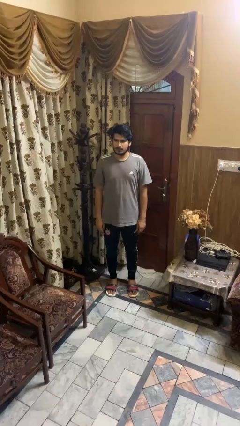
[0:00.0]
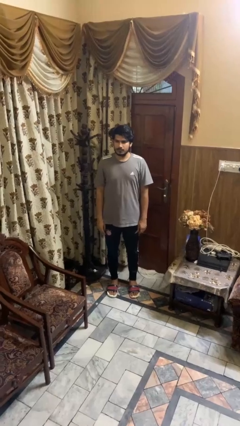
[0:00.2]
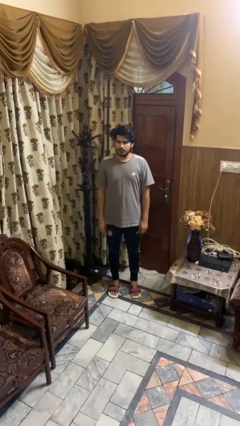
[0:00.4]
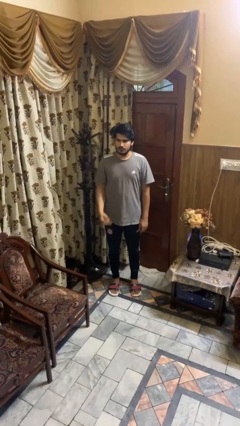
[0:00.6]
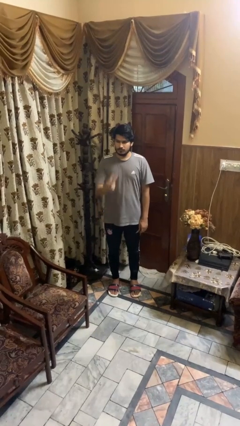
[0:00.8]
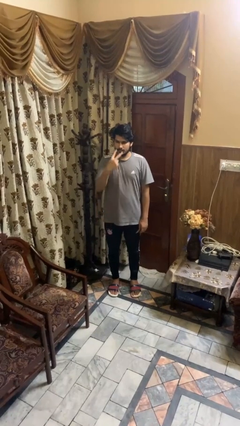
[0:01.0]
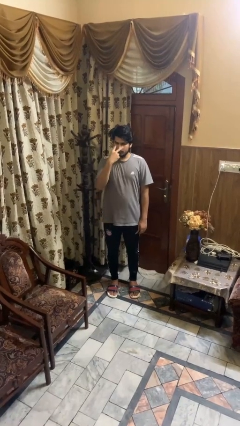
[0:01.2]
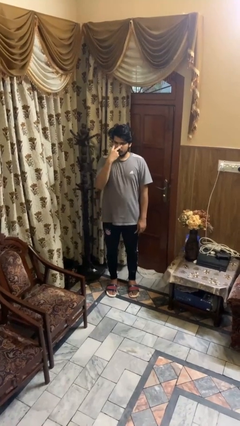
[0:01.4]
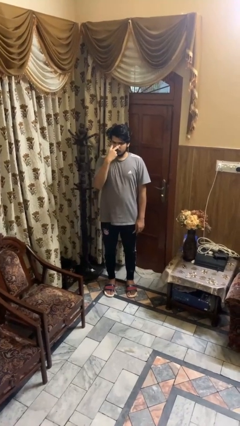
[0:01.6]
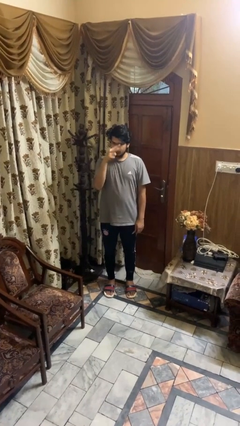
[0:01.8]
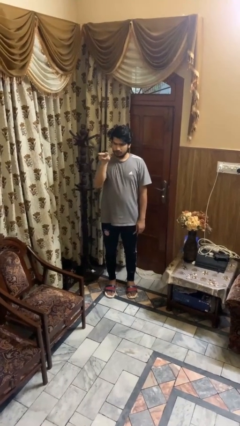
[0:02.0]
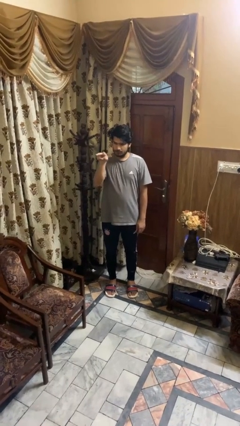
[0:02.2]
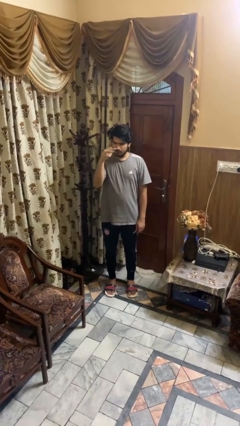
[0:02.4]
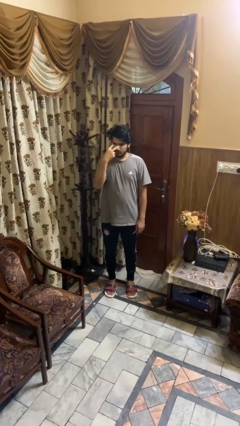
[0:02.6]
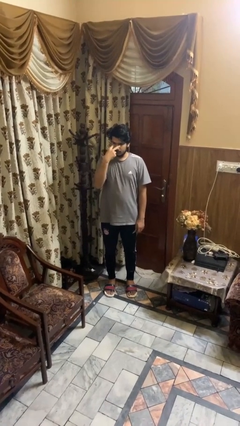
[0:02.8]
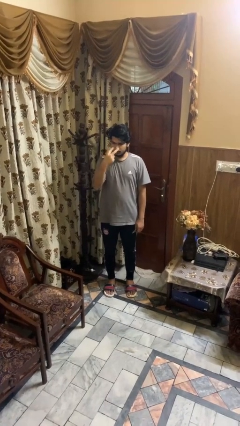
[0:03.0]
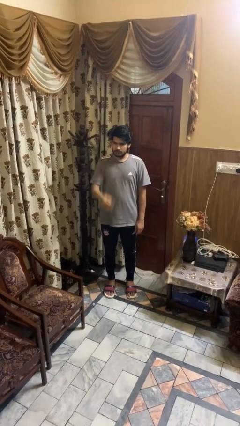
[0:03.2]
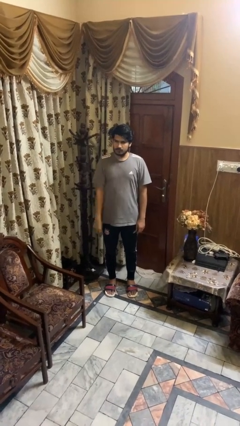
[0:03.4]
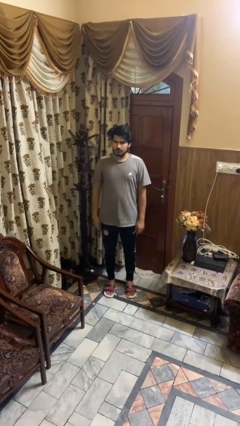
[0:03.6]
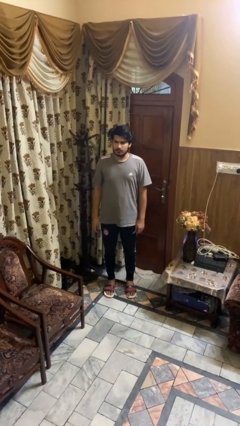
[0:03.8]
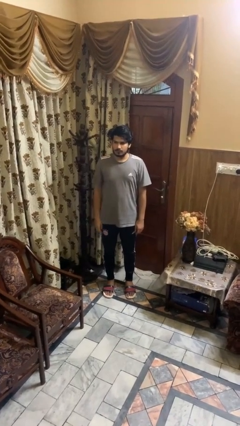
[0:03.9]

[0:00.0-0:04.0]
person gestures watch closely

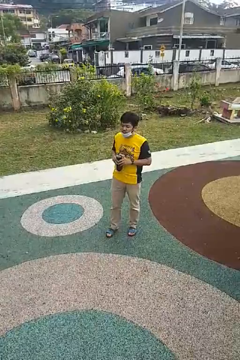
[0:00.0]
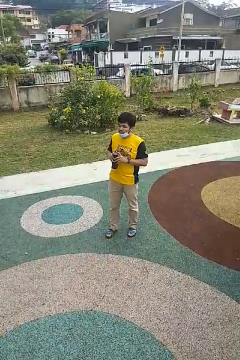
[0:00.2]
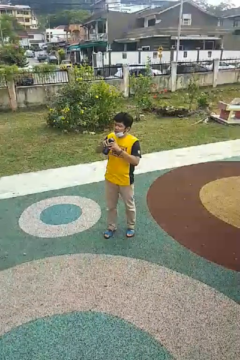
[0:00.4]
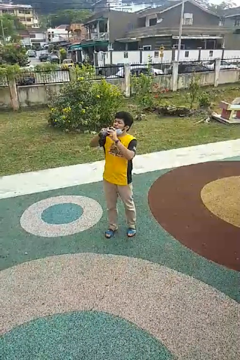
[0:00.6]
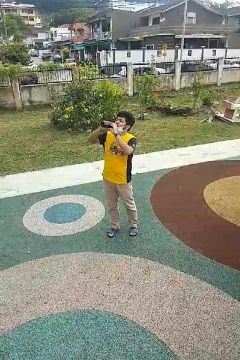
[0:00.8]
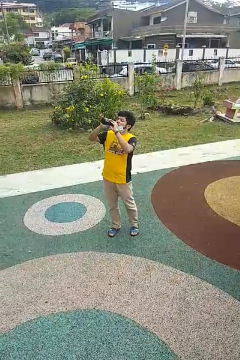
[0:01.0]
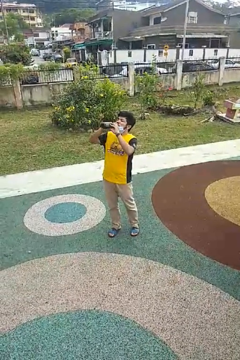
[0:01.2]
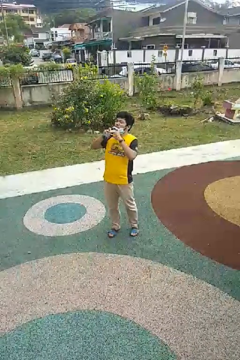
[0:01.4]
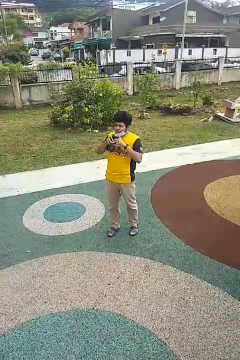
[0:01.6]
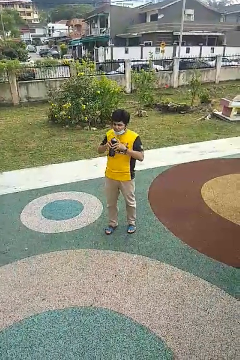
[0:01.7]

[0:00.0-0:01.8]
person drinks from bottle

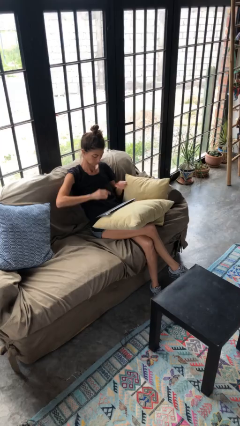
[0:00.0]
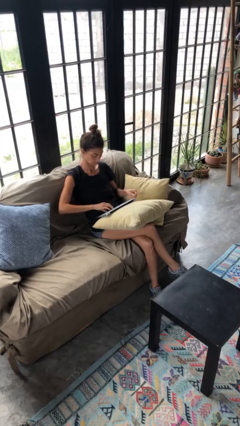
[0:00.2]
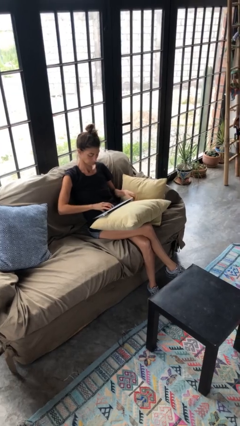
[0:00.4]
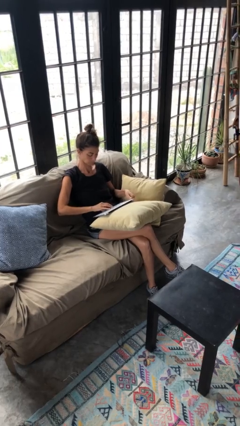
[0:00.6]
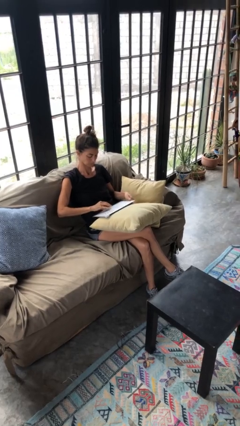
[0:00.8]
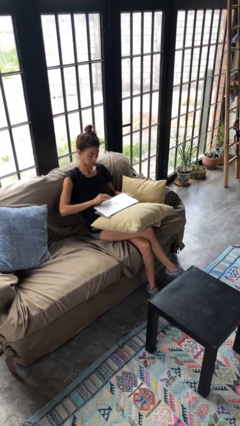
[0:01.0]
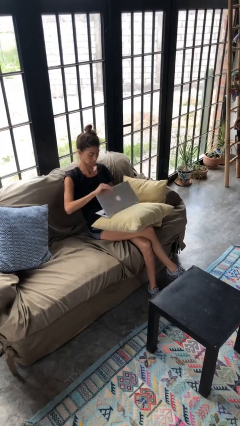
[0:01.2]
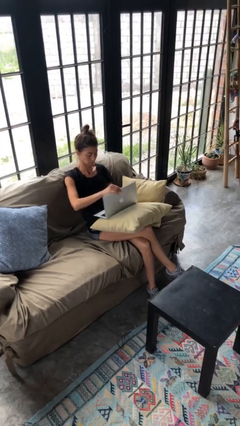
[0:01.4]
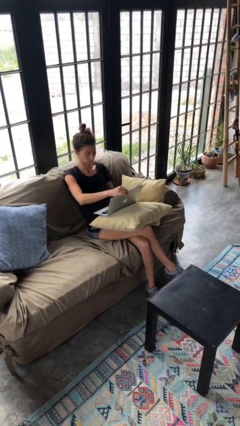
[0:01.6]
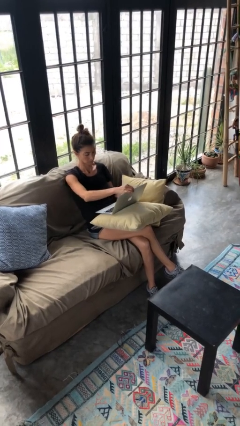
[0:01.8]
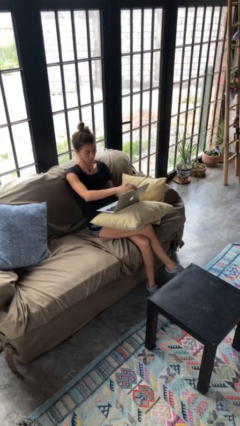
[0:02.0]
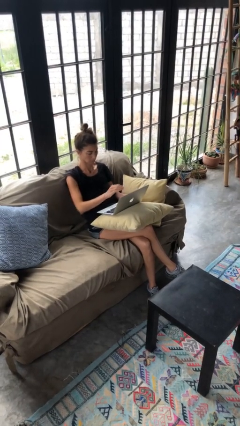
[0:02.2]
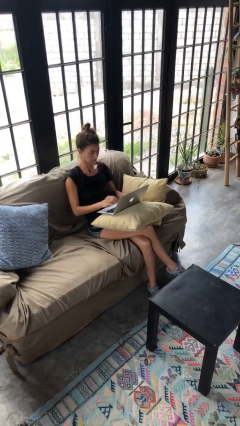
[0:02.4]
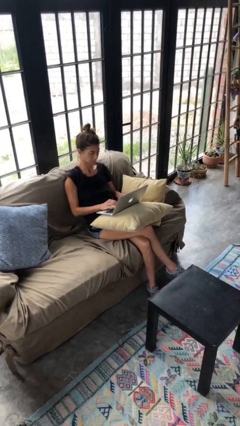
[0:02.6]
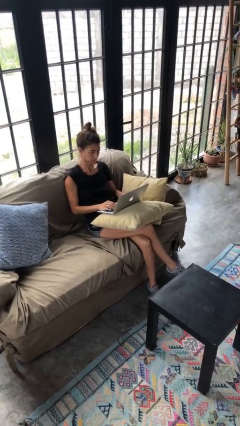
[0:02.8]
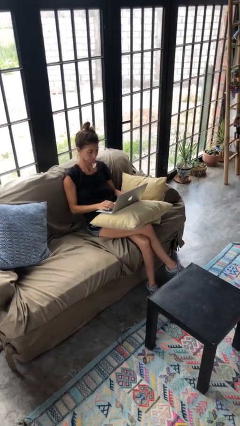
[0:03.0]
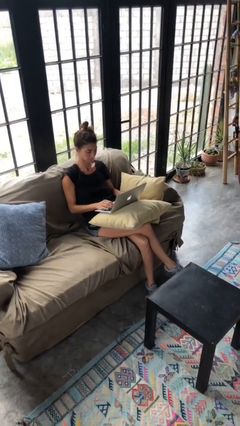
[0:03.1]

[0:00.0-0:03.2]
person opens laptop

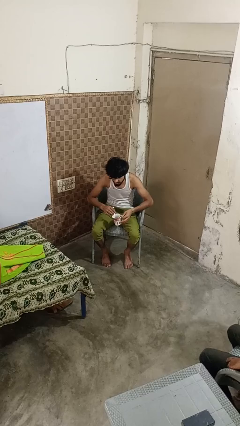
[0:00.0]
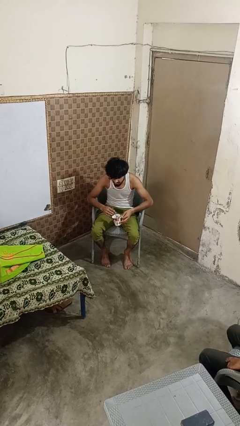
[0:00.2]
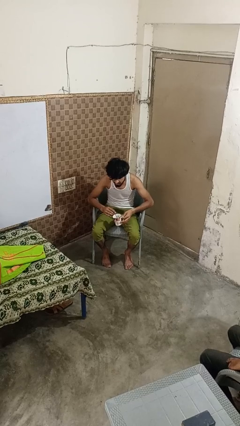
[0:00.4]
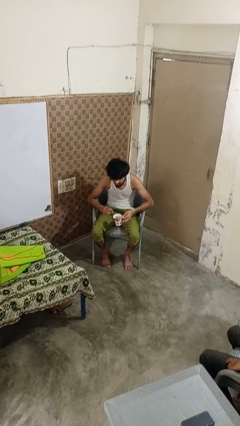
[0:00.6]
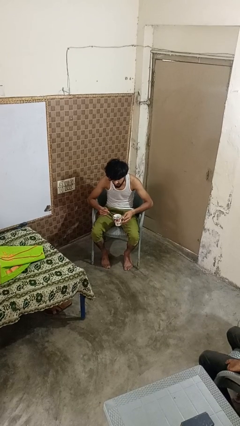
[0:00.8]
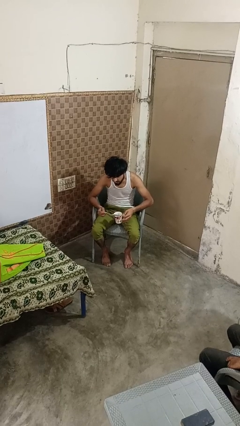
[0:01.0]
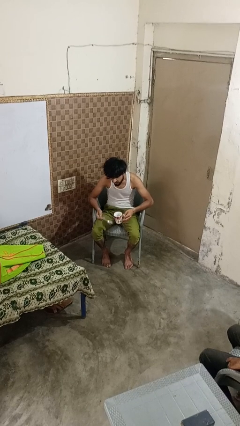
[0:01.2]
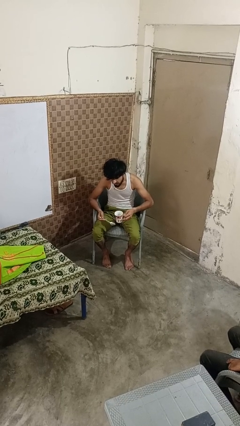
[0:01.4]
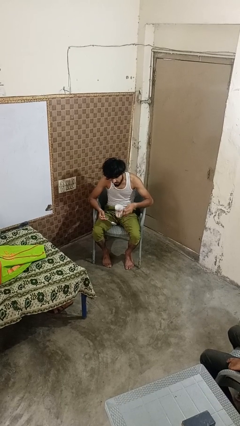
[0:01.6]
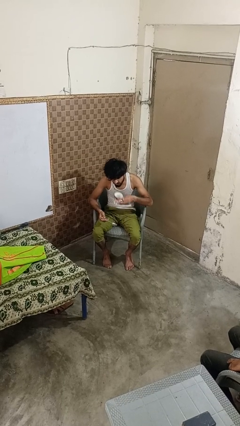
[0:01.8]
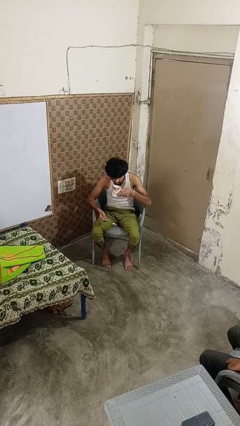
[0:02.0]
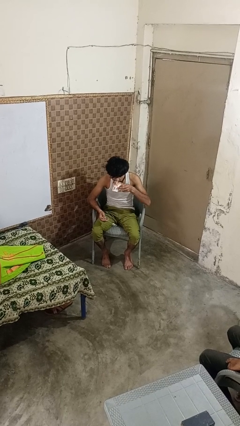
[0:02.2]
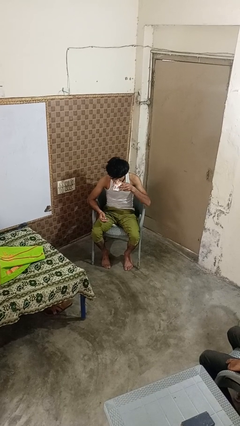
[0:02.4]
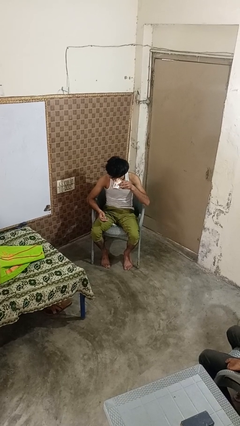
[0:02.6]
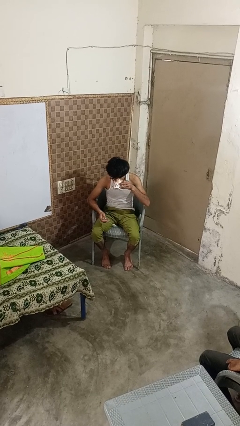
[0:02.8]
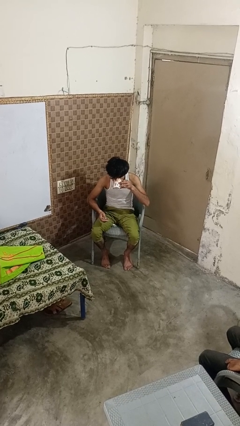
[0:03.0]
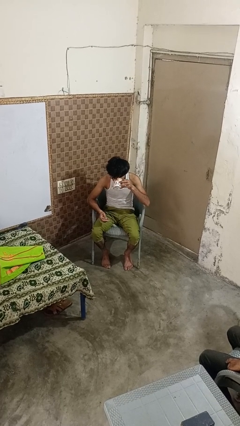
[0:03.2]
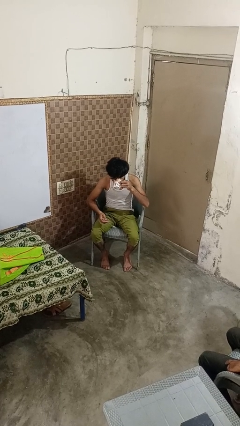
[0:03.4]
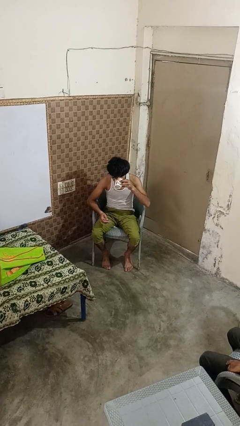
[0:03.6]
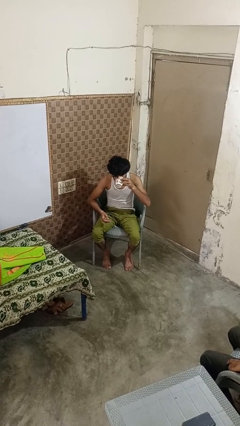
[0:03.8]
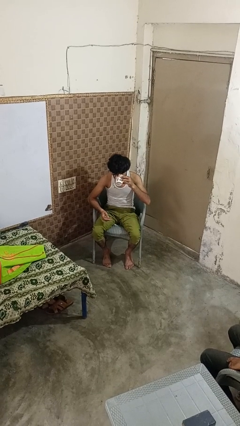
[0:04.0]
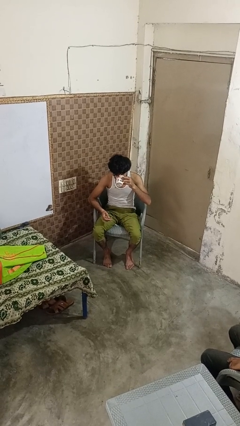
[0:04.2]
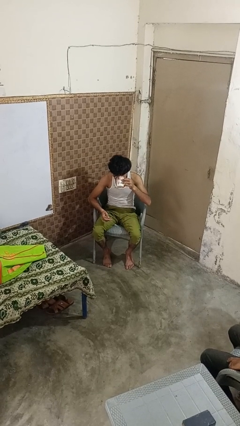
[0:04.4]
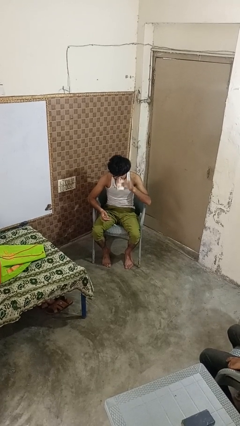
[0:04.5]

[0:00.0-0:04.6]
person drinks from mug

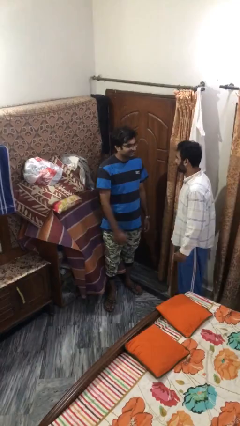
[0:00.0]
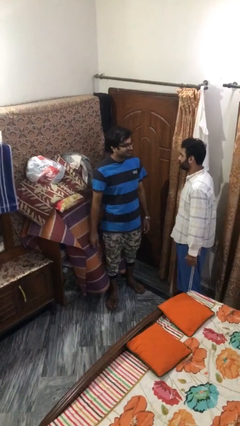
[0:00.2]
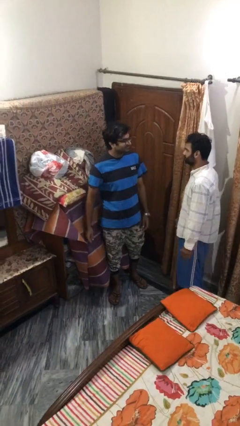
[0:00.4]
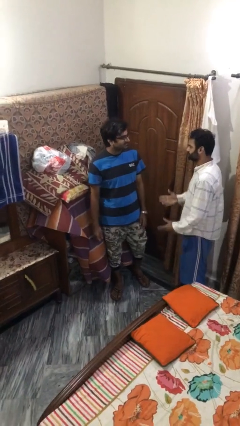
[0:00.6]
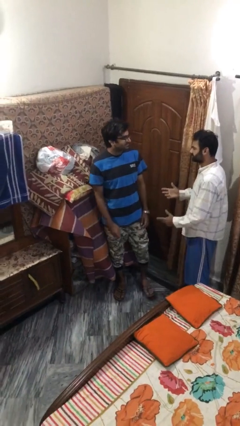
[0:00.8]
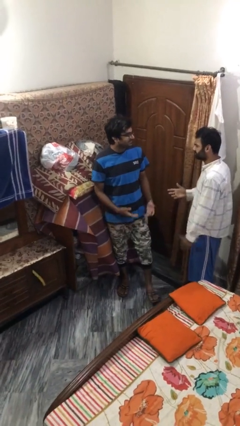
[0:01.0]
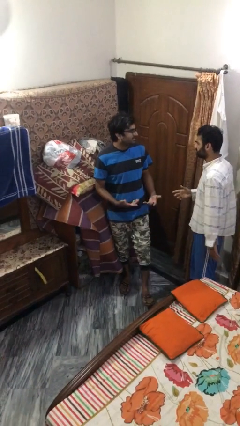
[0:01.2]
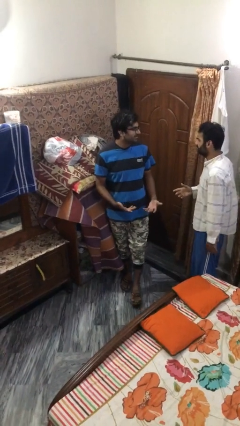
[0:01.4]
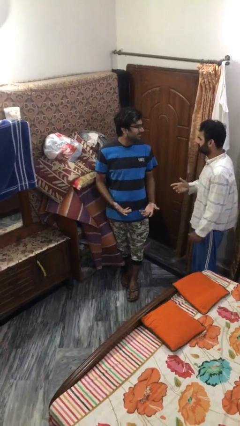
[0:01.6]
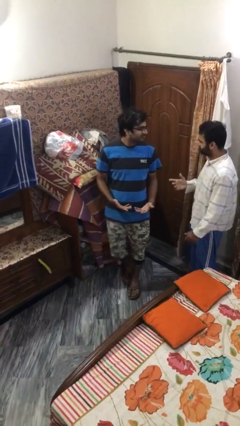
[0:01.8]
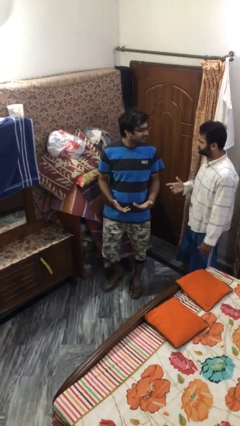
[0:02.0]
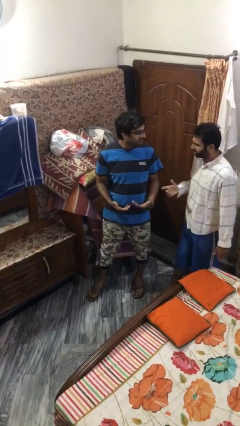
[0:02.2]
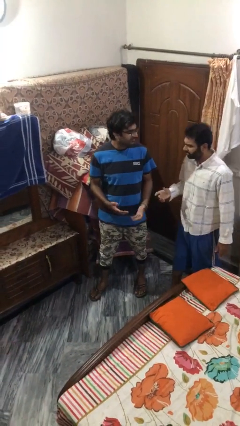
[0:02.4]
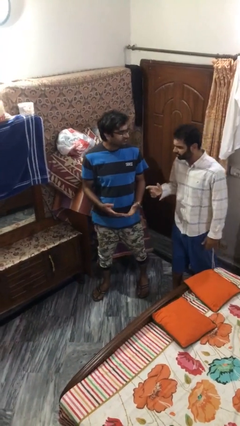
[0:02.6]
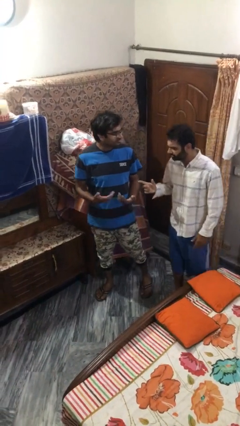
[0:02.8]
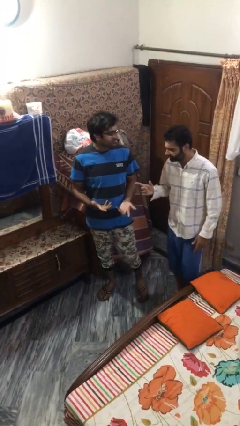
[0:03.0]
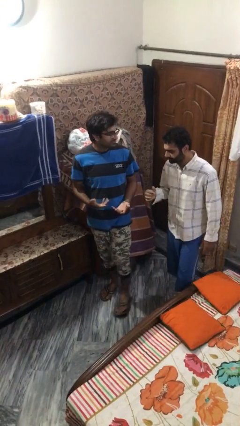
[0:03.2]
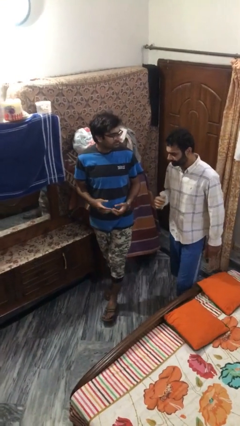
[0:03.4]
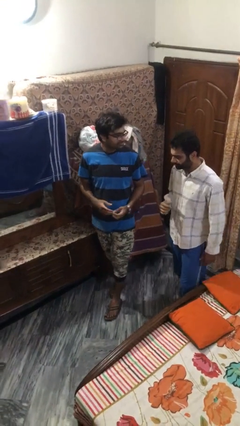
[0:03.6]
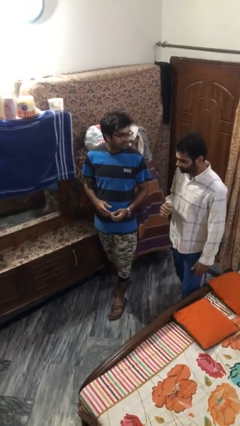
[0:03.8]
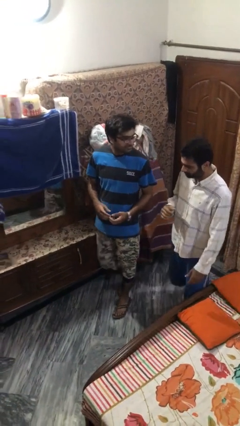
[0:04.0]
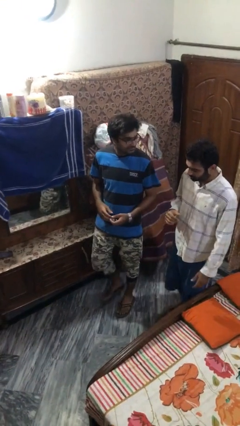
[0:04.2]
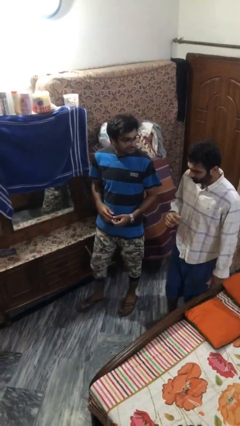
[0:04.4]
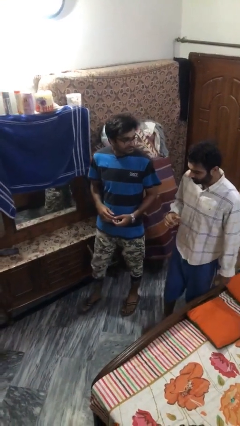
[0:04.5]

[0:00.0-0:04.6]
person talks to person
